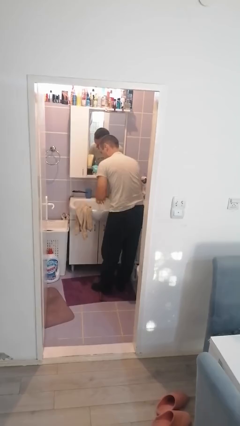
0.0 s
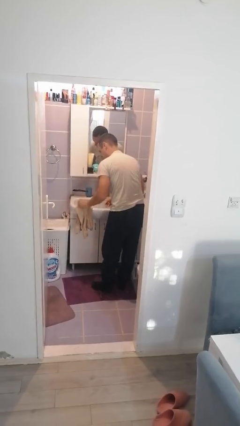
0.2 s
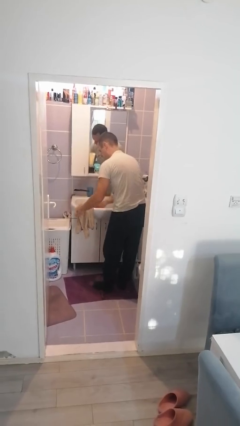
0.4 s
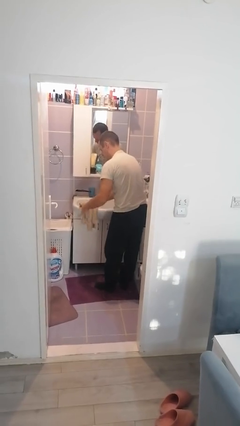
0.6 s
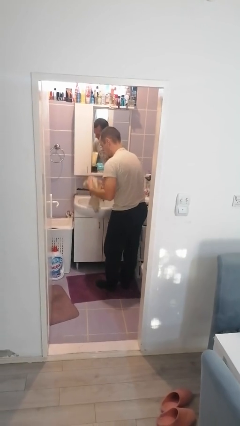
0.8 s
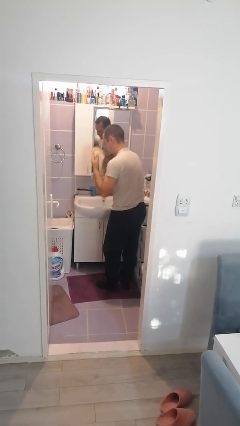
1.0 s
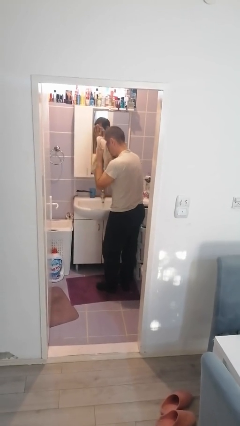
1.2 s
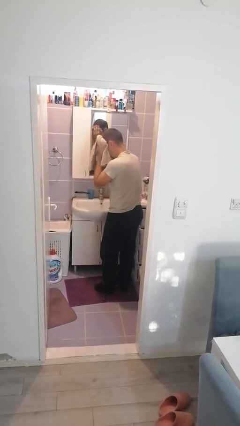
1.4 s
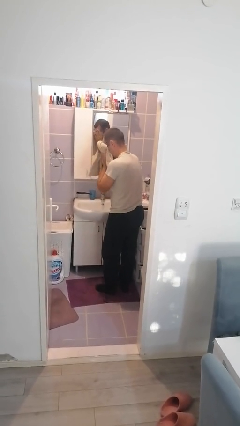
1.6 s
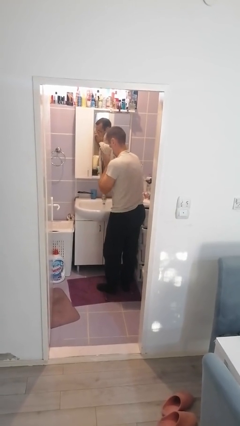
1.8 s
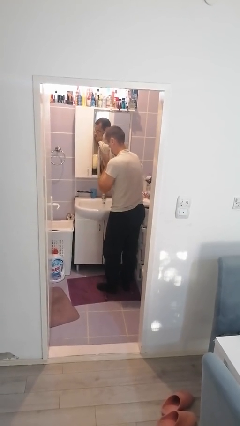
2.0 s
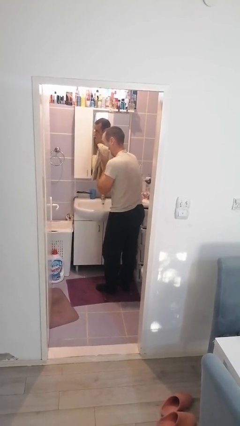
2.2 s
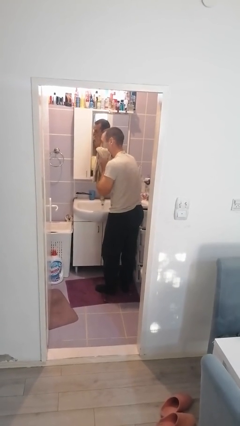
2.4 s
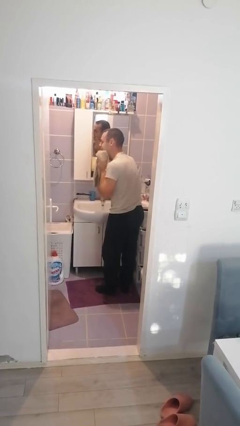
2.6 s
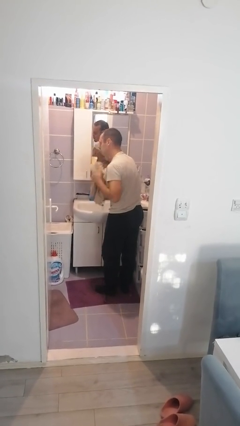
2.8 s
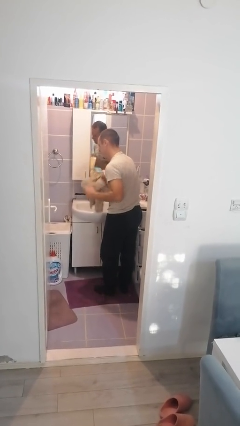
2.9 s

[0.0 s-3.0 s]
person dries face with towel

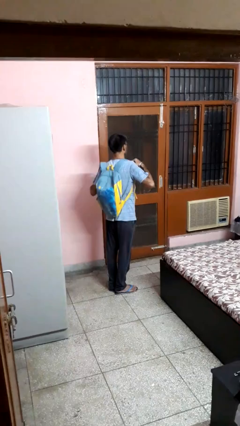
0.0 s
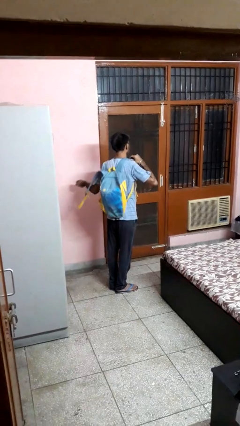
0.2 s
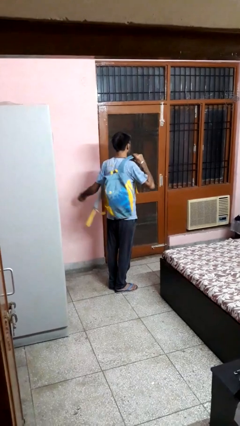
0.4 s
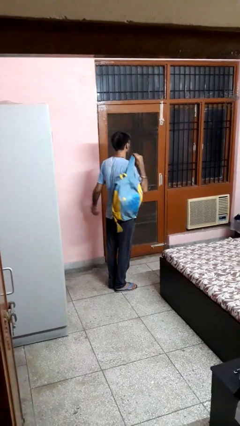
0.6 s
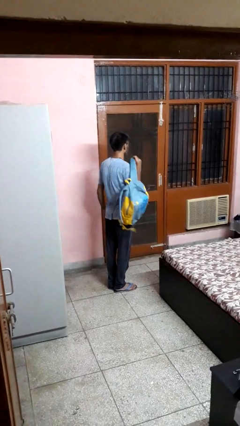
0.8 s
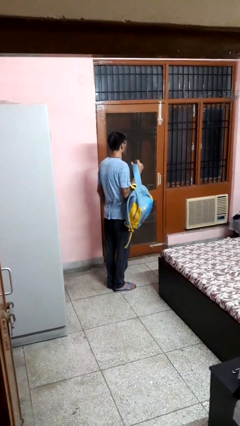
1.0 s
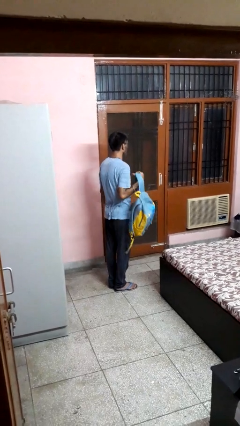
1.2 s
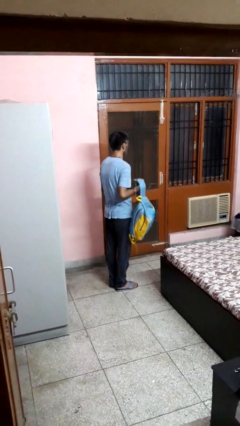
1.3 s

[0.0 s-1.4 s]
person takes off backpack

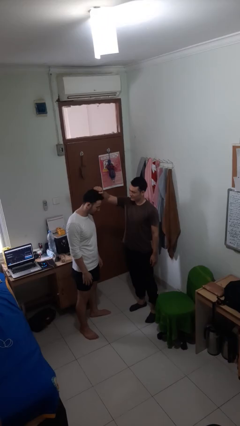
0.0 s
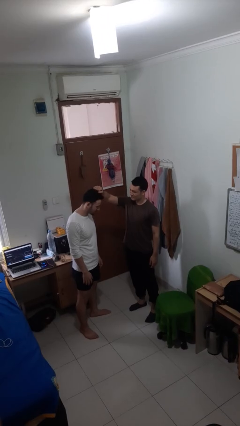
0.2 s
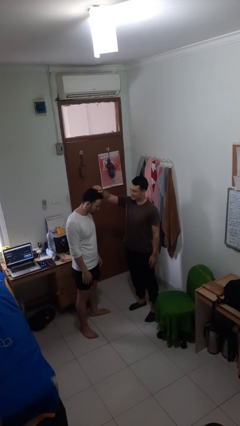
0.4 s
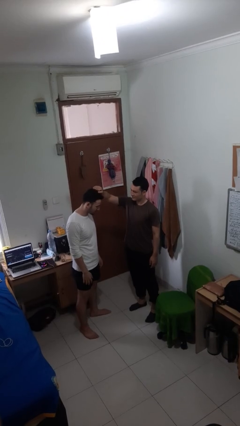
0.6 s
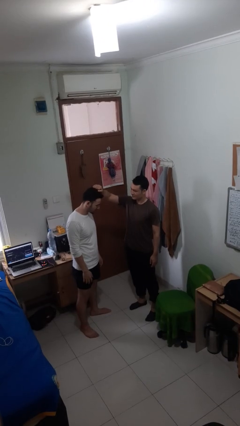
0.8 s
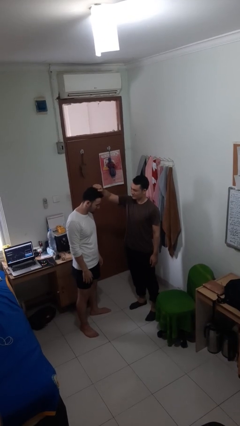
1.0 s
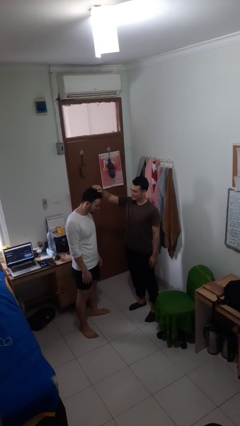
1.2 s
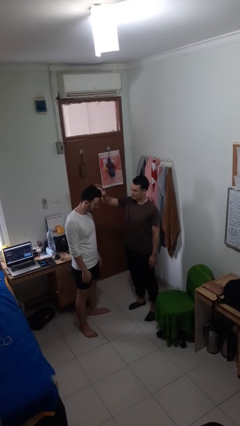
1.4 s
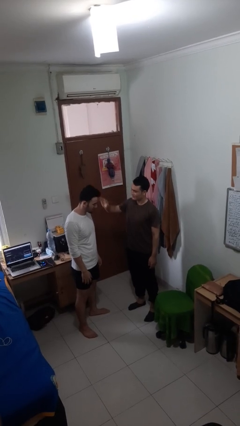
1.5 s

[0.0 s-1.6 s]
person grabs person by hair

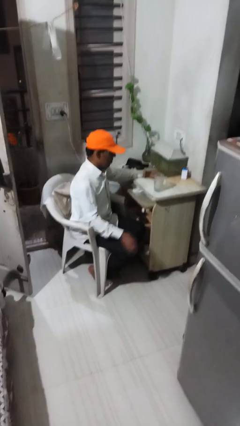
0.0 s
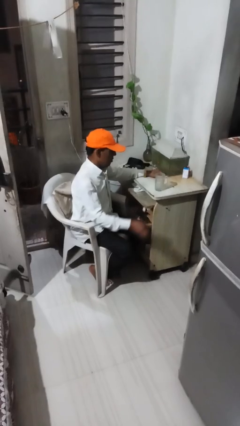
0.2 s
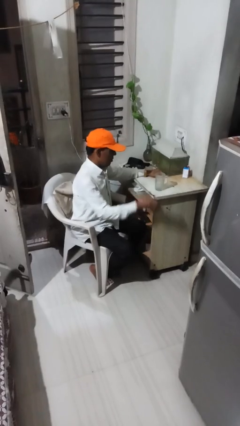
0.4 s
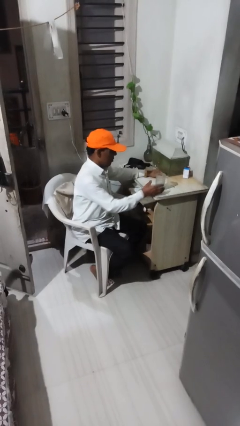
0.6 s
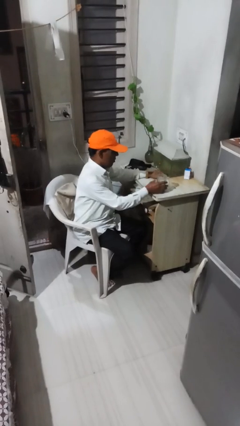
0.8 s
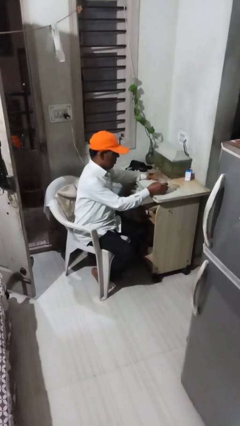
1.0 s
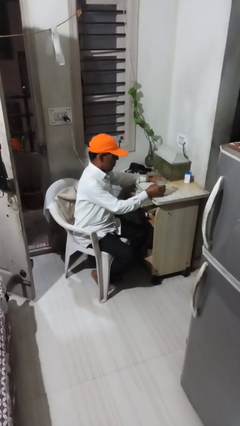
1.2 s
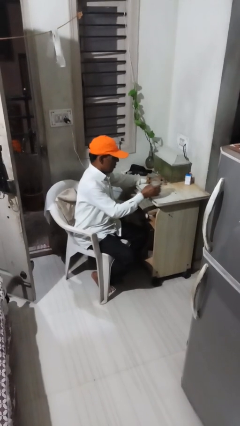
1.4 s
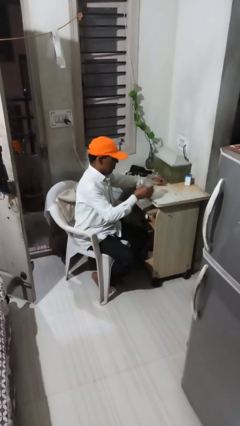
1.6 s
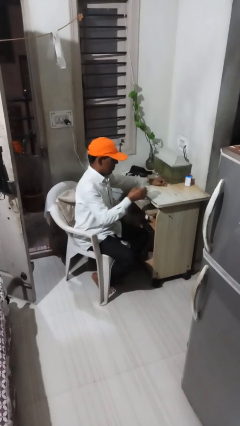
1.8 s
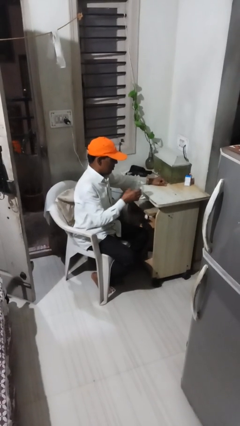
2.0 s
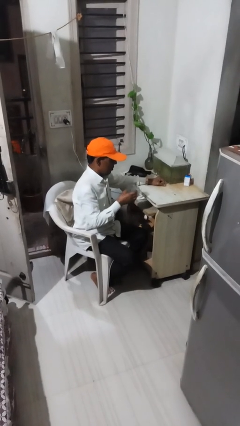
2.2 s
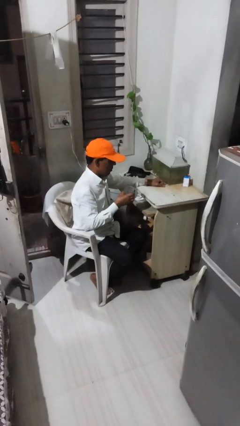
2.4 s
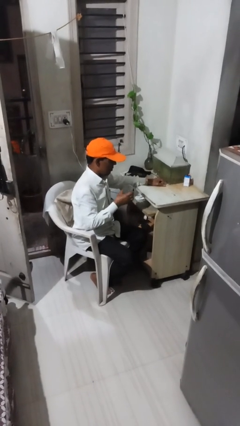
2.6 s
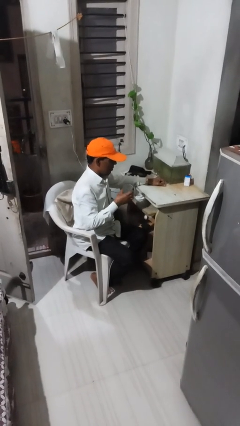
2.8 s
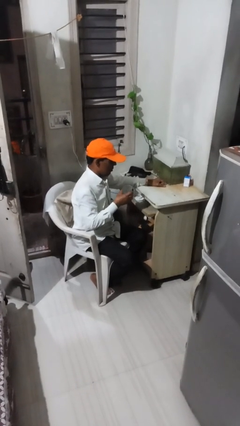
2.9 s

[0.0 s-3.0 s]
person picks up object from table

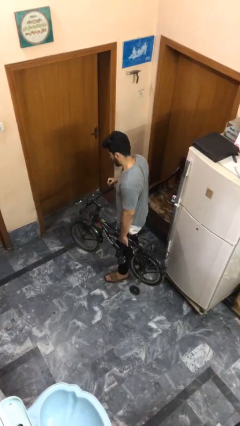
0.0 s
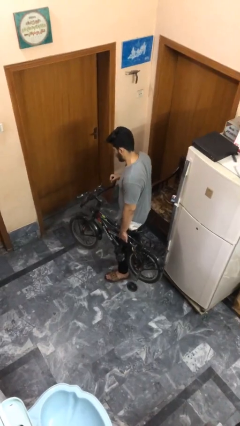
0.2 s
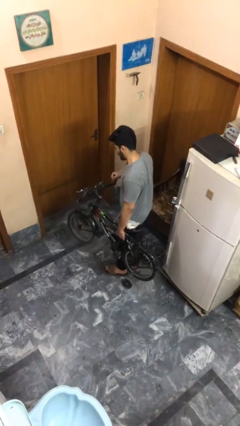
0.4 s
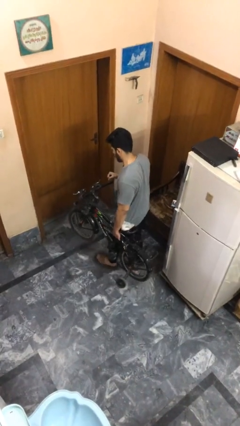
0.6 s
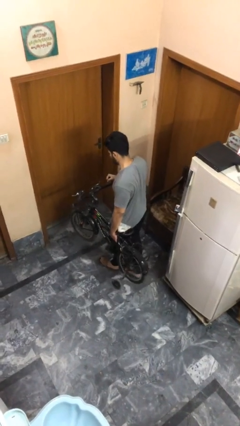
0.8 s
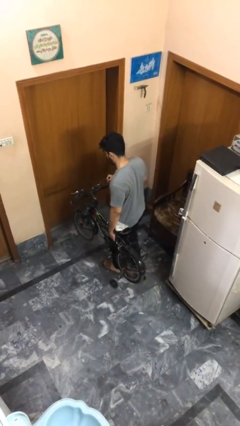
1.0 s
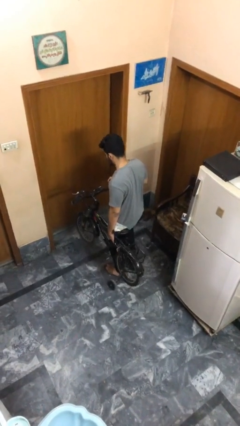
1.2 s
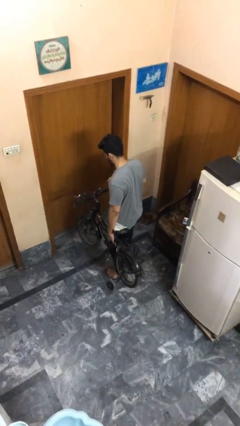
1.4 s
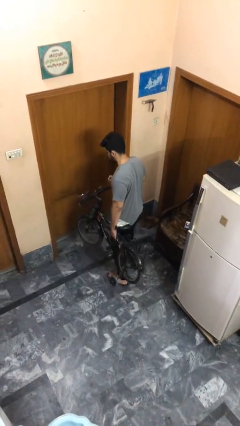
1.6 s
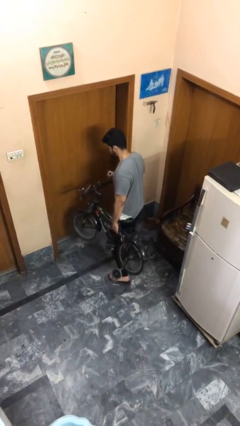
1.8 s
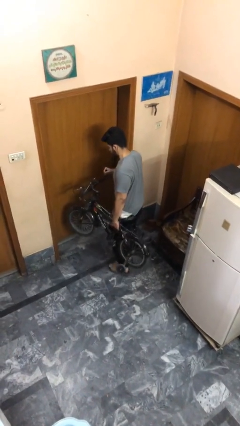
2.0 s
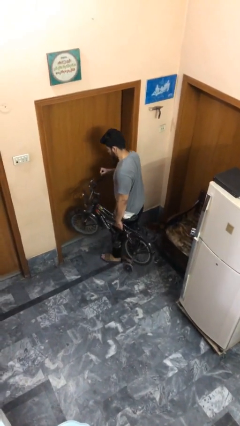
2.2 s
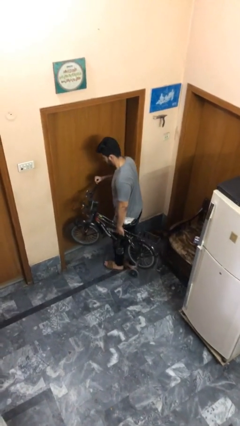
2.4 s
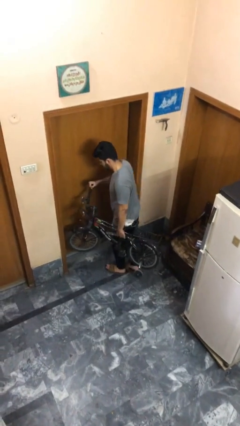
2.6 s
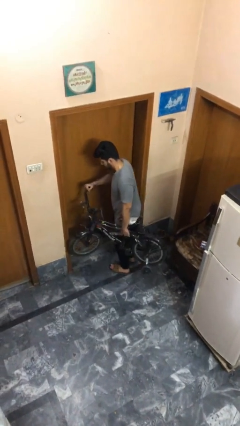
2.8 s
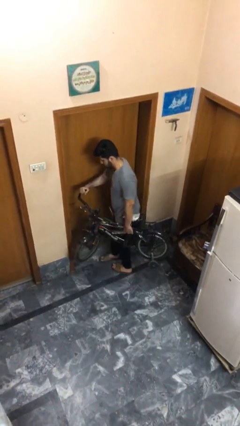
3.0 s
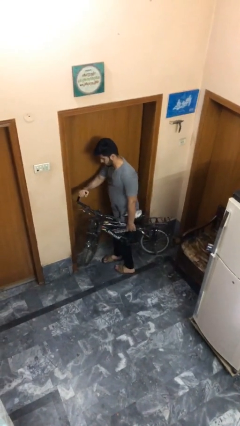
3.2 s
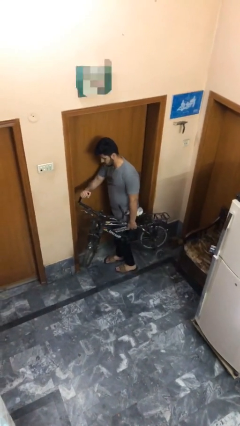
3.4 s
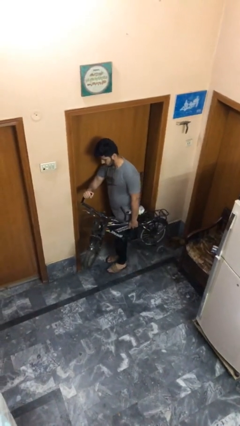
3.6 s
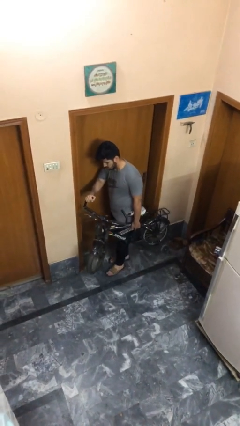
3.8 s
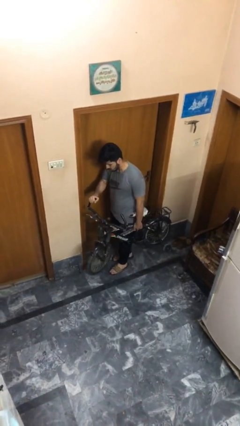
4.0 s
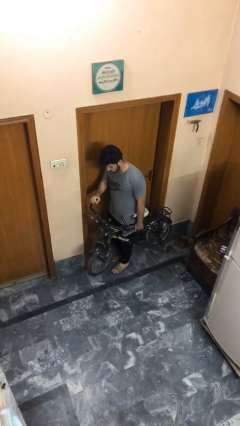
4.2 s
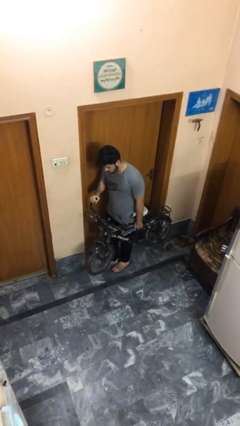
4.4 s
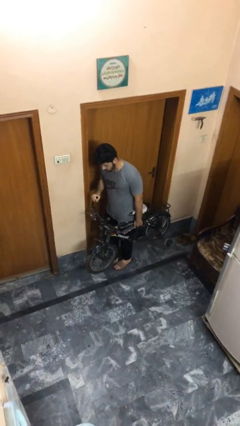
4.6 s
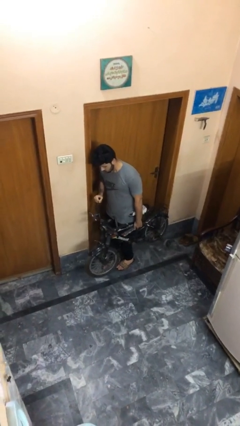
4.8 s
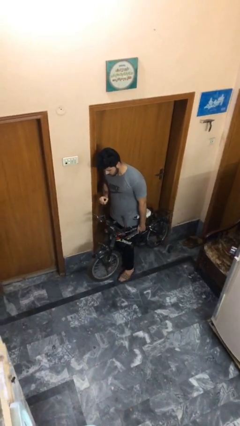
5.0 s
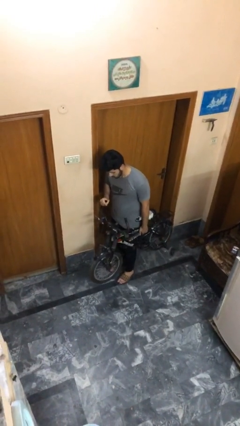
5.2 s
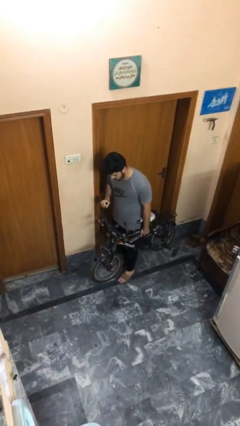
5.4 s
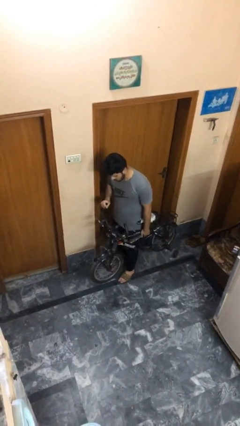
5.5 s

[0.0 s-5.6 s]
person carries bicycle

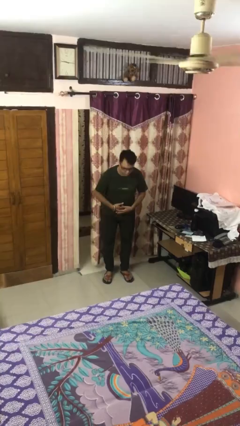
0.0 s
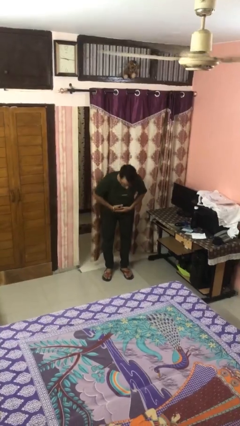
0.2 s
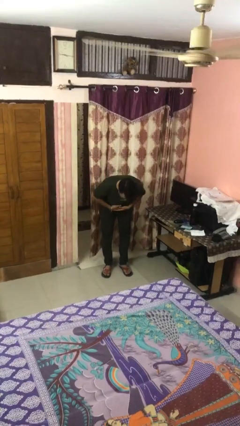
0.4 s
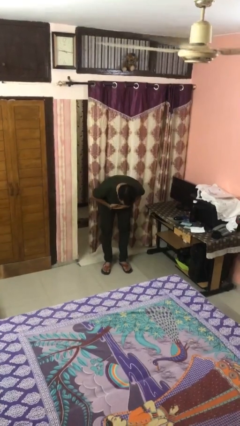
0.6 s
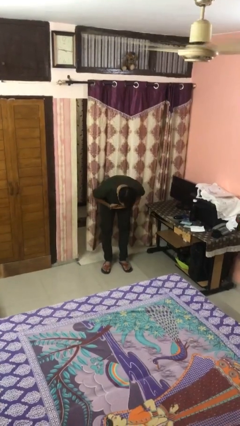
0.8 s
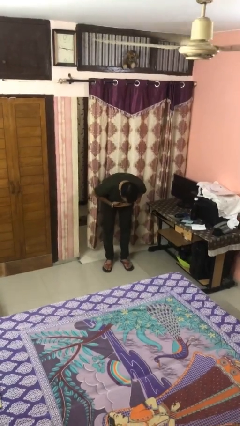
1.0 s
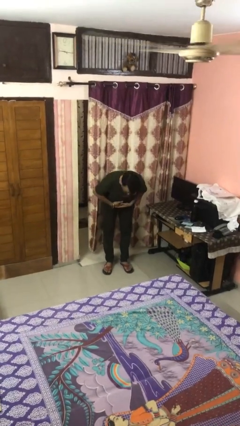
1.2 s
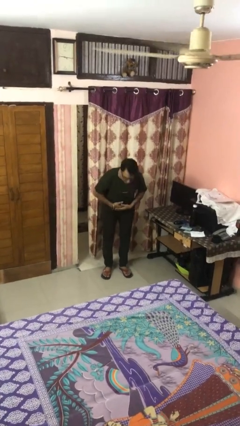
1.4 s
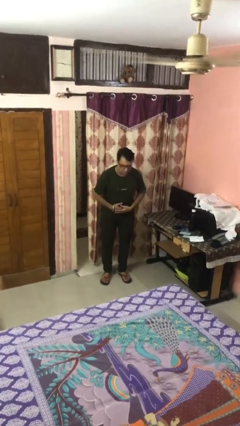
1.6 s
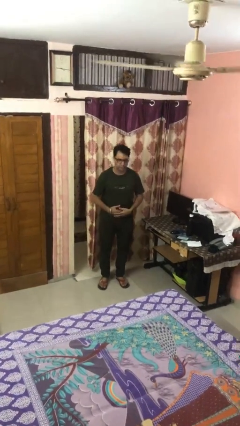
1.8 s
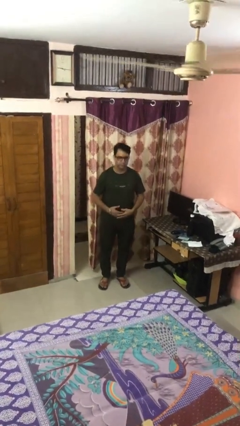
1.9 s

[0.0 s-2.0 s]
person bows

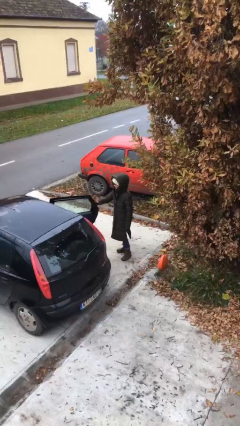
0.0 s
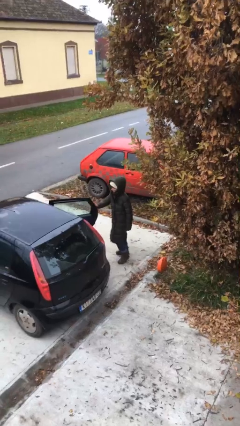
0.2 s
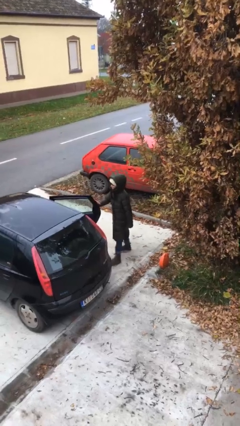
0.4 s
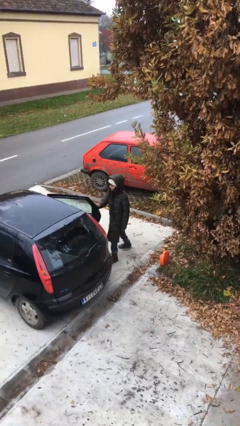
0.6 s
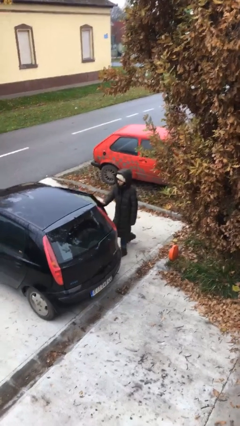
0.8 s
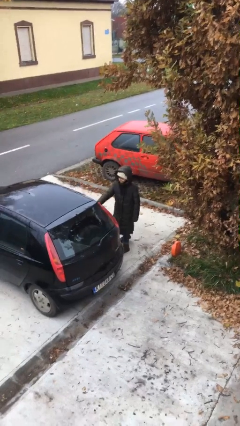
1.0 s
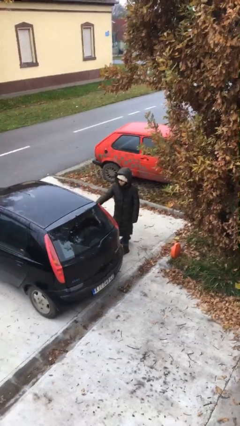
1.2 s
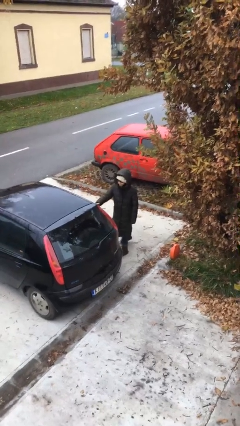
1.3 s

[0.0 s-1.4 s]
person closes car door
